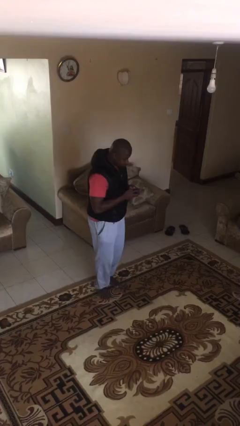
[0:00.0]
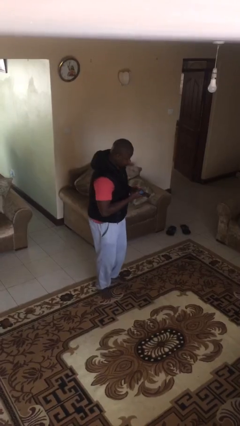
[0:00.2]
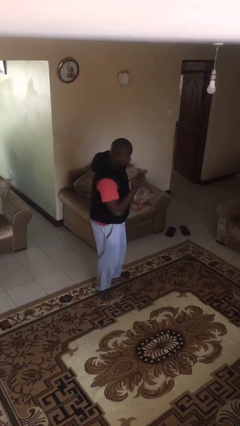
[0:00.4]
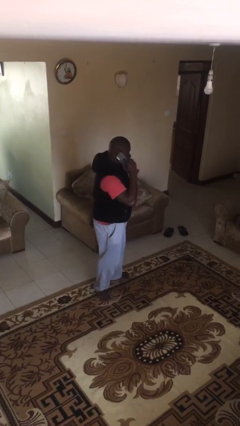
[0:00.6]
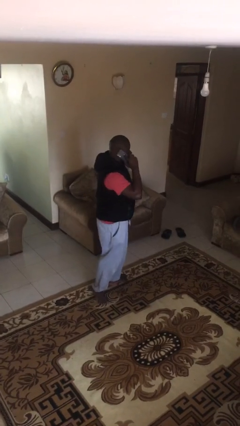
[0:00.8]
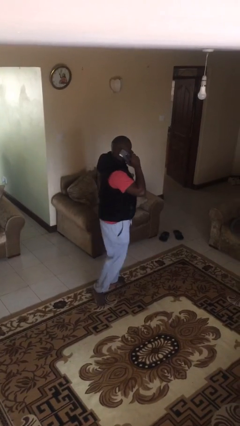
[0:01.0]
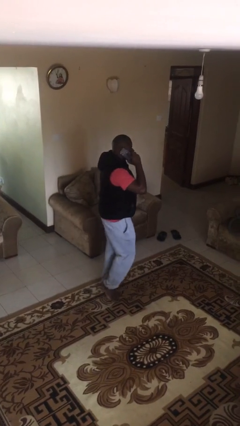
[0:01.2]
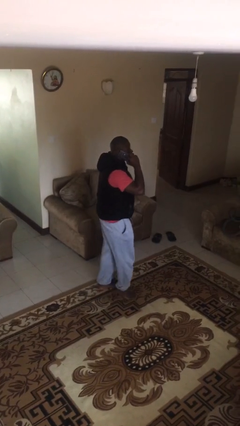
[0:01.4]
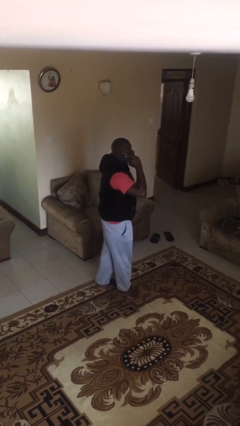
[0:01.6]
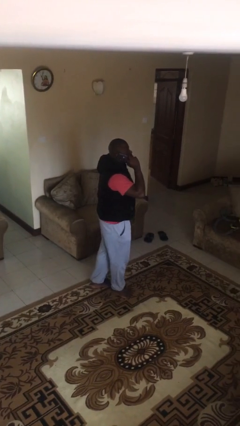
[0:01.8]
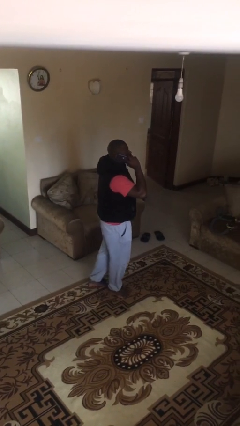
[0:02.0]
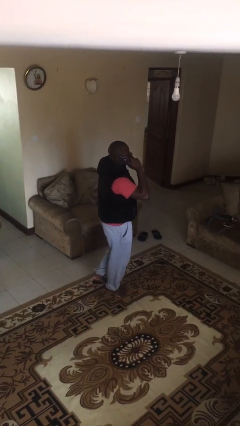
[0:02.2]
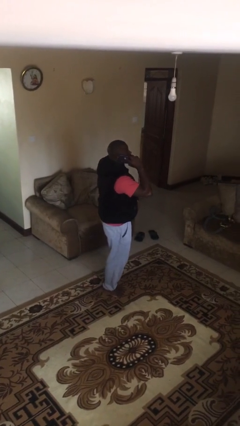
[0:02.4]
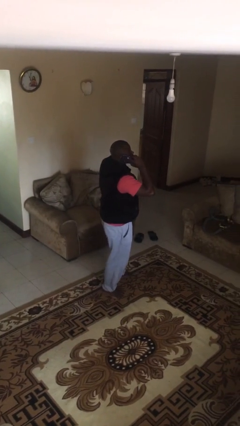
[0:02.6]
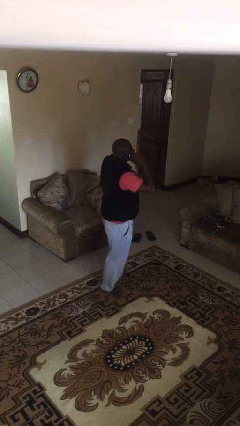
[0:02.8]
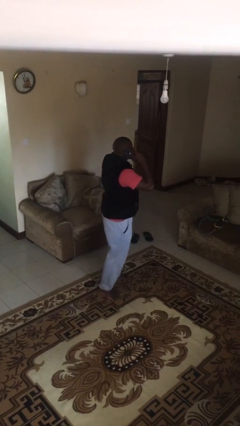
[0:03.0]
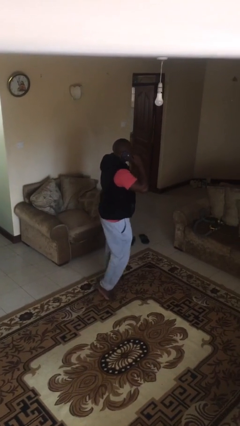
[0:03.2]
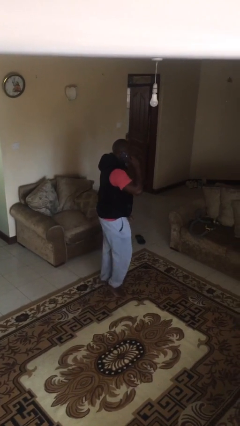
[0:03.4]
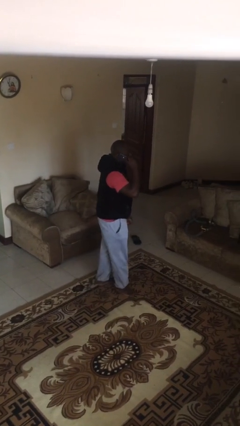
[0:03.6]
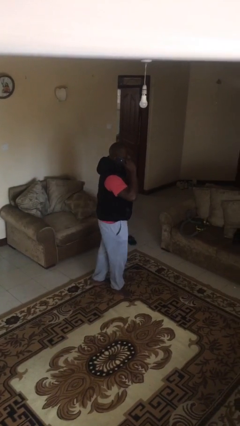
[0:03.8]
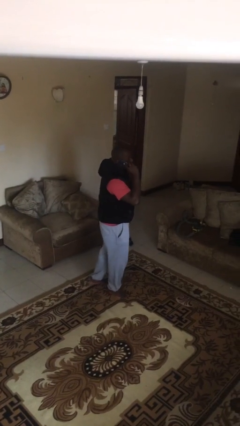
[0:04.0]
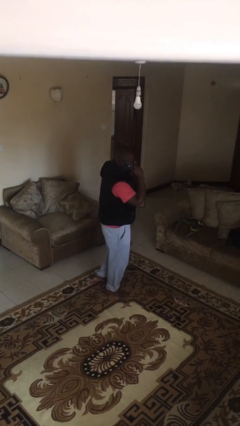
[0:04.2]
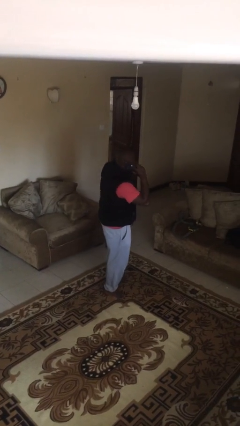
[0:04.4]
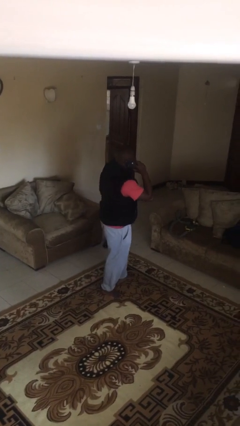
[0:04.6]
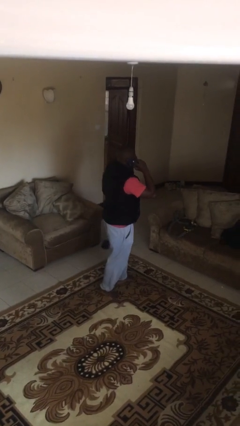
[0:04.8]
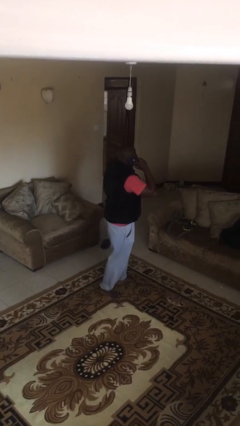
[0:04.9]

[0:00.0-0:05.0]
person talks on phone

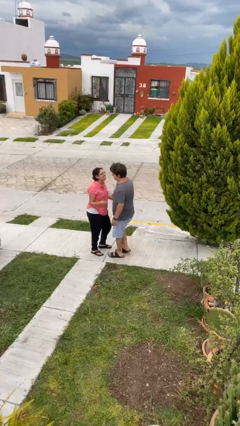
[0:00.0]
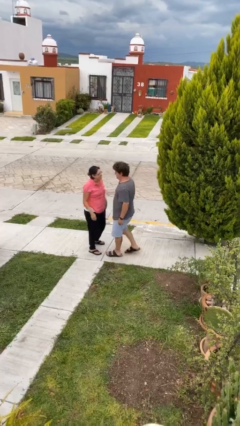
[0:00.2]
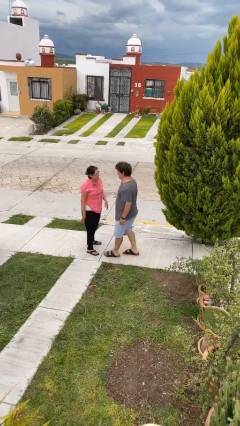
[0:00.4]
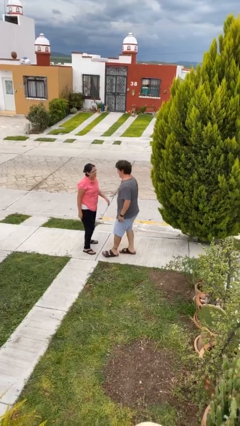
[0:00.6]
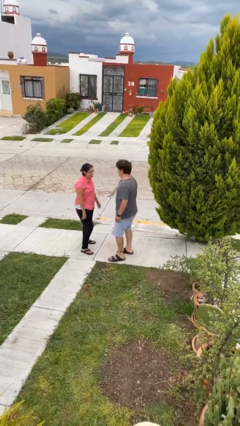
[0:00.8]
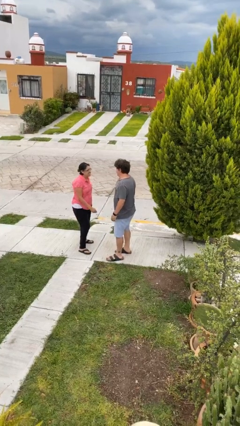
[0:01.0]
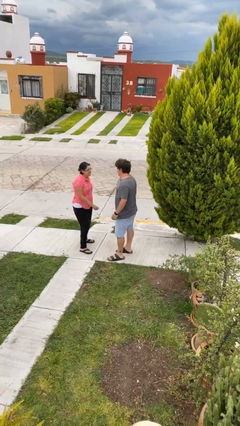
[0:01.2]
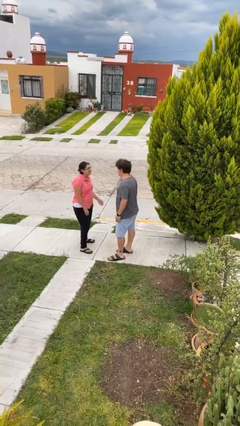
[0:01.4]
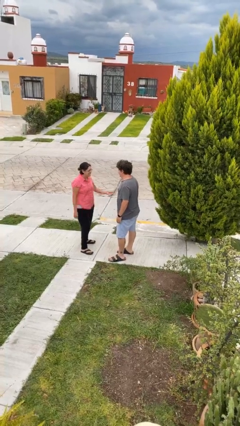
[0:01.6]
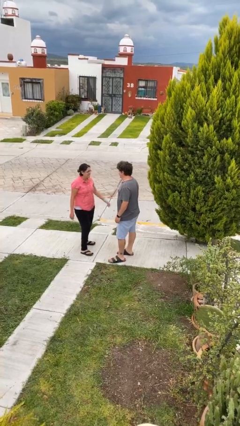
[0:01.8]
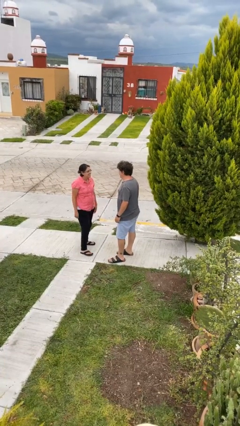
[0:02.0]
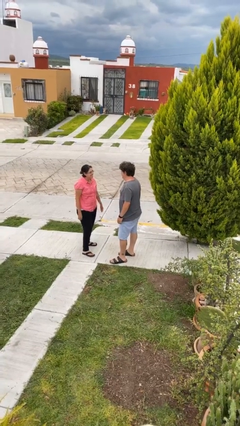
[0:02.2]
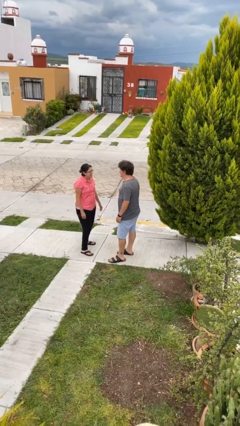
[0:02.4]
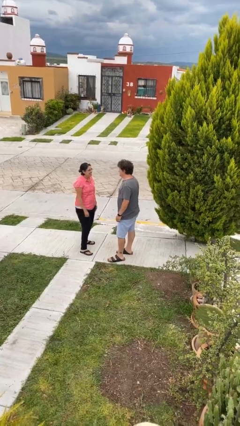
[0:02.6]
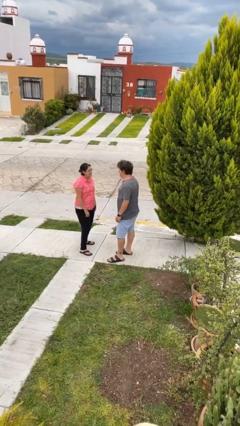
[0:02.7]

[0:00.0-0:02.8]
person talks to person

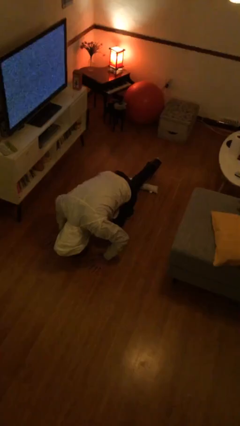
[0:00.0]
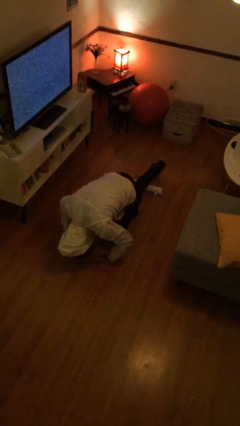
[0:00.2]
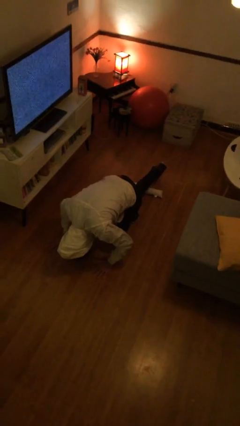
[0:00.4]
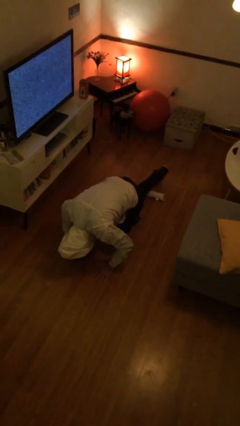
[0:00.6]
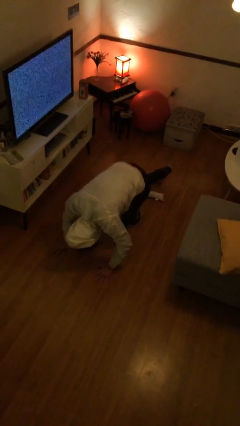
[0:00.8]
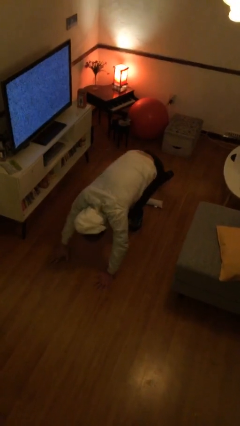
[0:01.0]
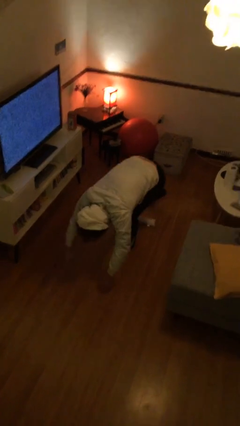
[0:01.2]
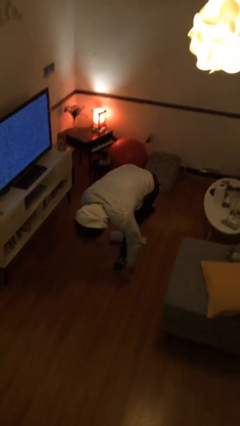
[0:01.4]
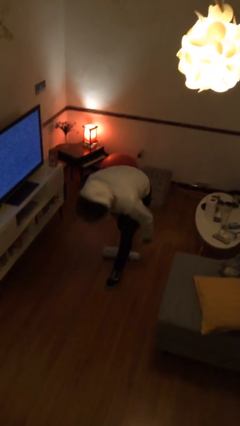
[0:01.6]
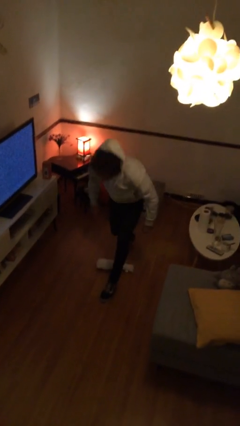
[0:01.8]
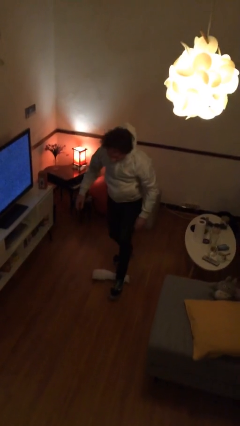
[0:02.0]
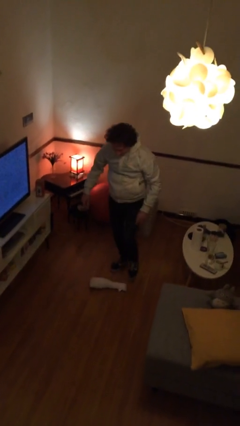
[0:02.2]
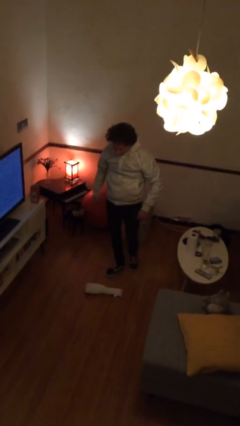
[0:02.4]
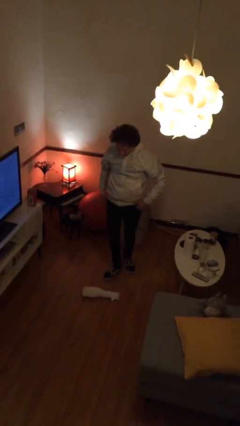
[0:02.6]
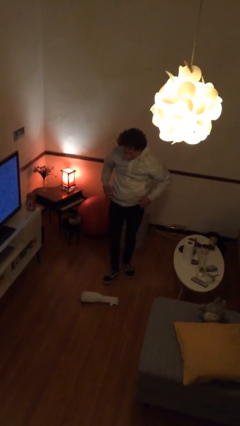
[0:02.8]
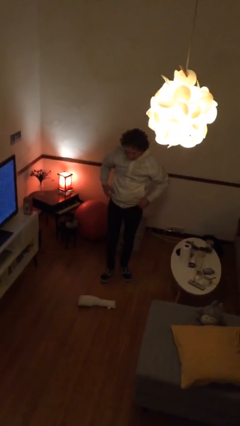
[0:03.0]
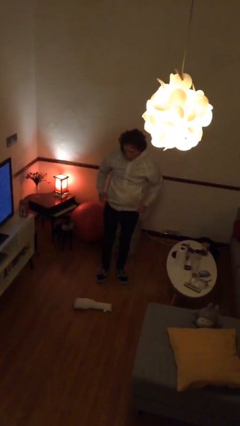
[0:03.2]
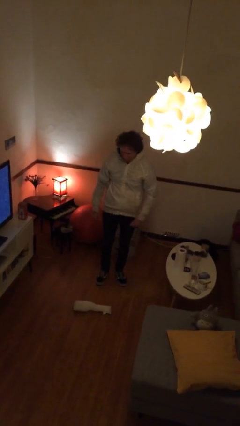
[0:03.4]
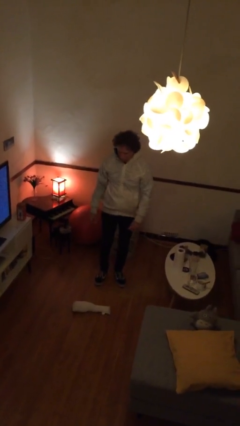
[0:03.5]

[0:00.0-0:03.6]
person stands up from floor

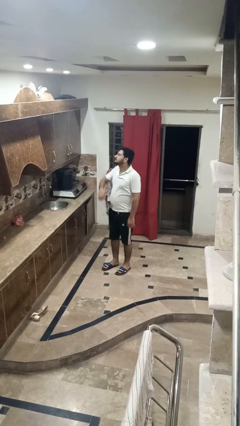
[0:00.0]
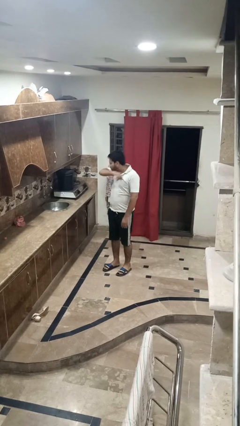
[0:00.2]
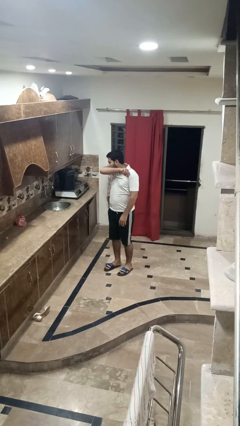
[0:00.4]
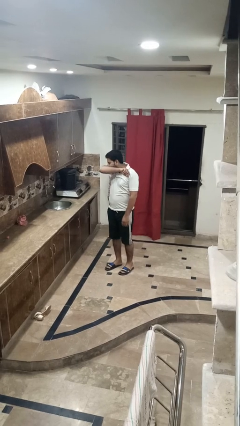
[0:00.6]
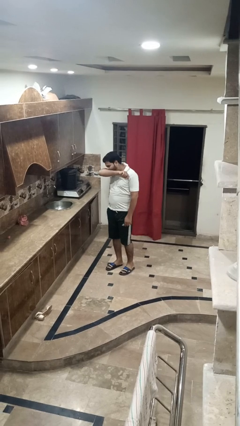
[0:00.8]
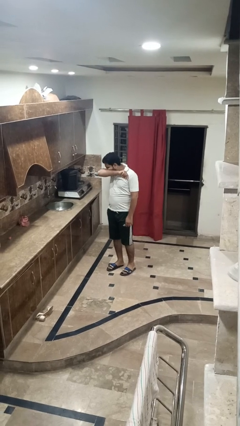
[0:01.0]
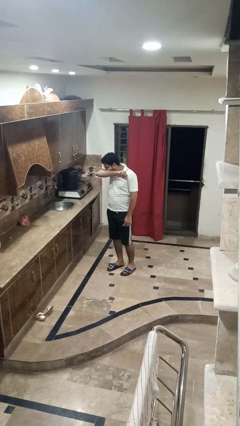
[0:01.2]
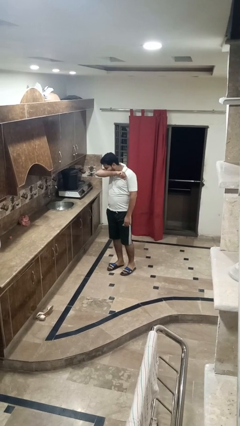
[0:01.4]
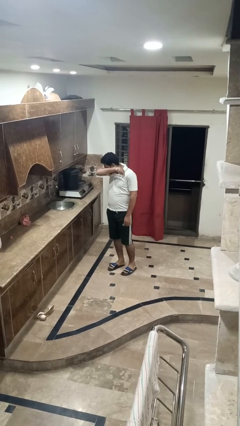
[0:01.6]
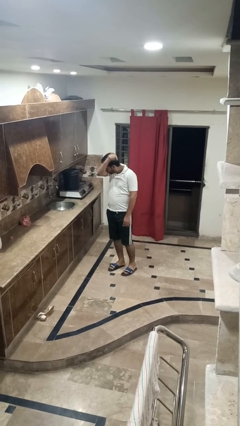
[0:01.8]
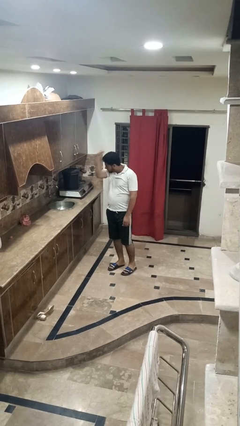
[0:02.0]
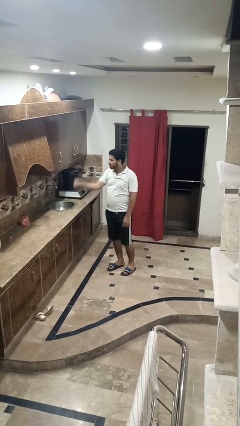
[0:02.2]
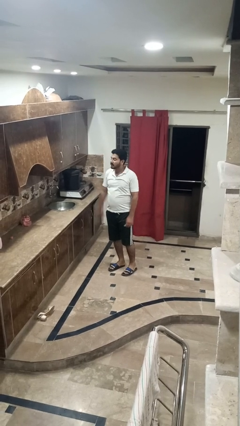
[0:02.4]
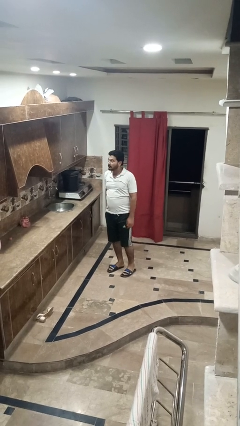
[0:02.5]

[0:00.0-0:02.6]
person sneezes into arm

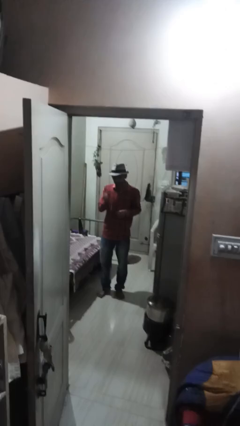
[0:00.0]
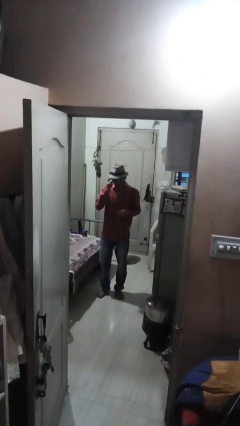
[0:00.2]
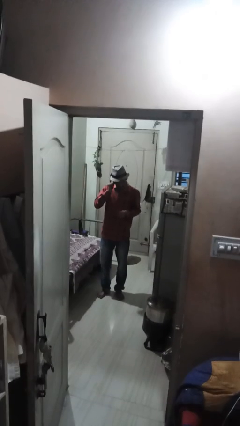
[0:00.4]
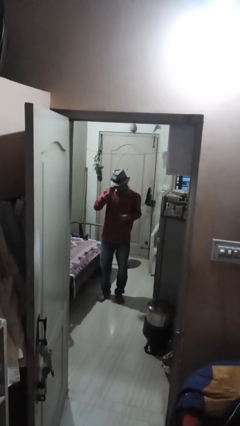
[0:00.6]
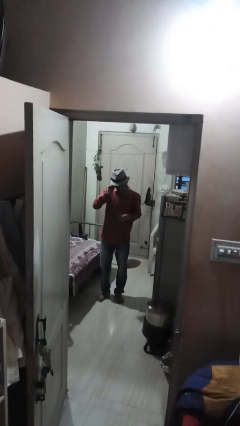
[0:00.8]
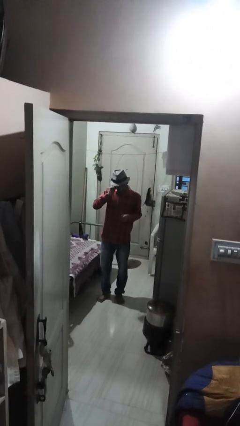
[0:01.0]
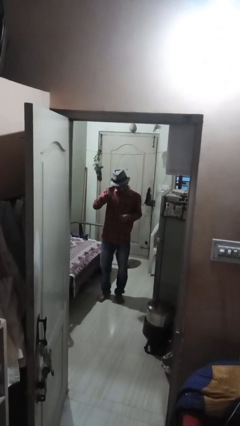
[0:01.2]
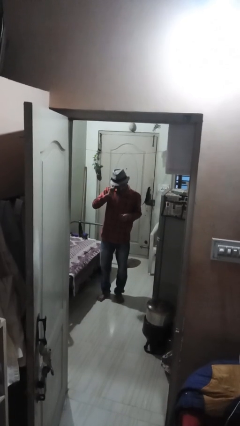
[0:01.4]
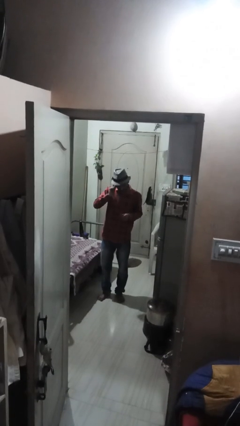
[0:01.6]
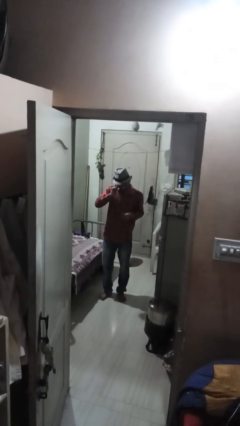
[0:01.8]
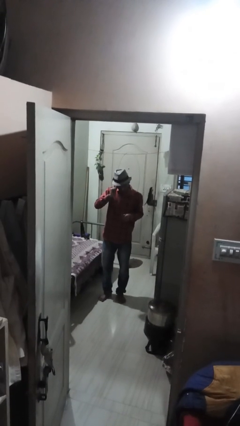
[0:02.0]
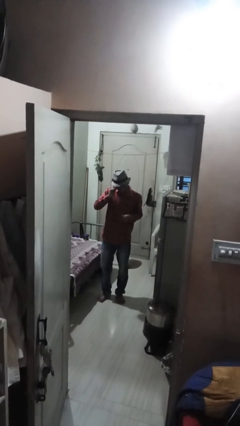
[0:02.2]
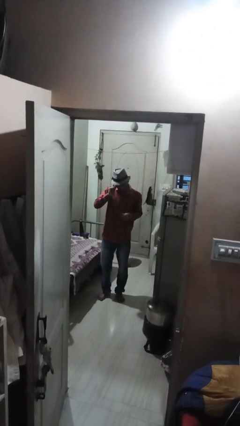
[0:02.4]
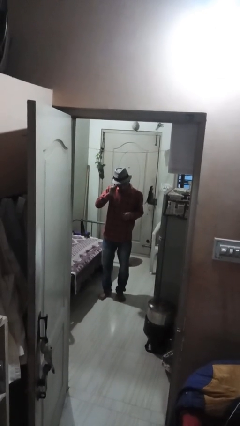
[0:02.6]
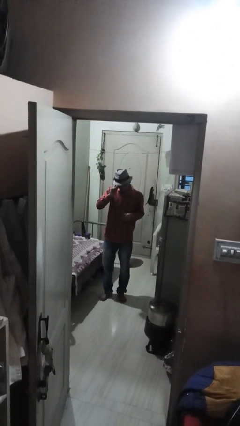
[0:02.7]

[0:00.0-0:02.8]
person touches earlobe

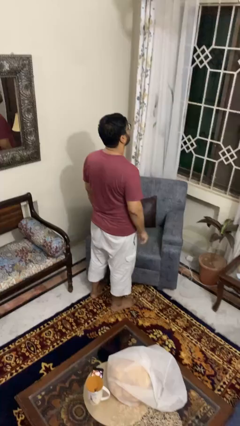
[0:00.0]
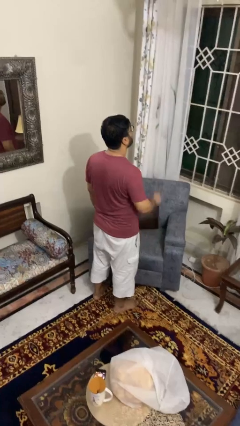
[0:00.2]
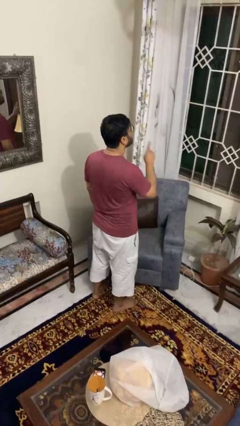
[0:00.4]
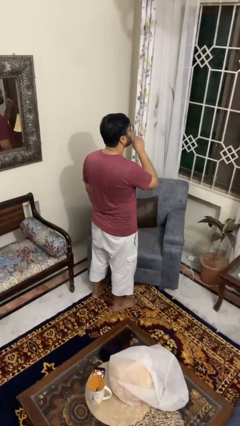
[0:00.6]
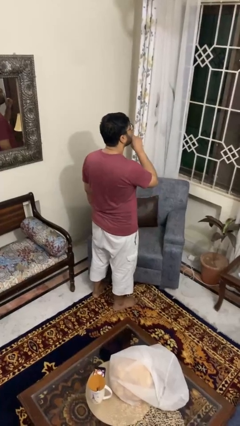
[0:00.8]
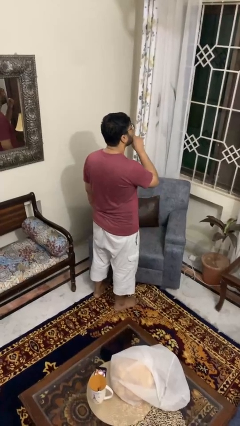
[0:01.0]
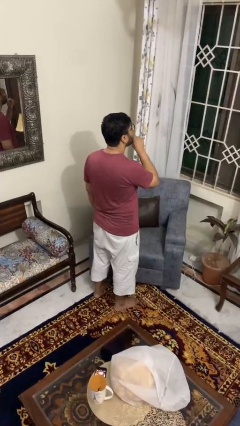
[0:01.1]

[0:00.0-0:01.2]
person gestures be quiet
